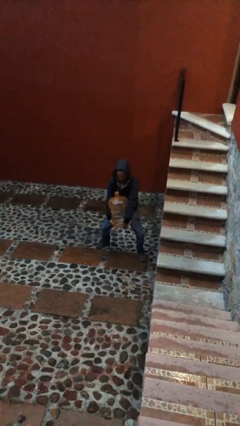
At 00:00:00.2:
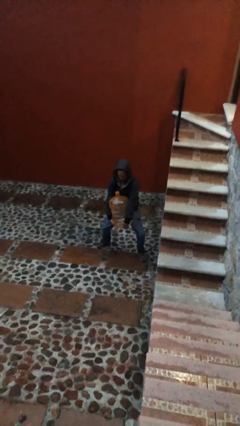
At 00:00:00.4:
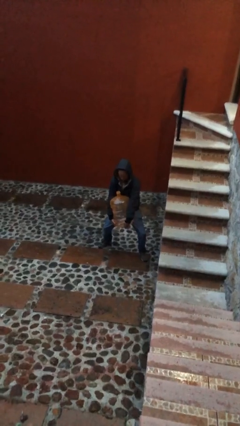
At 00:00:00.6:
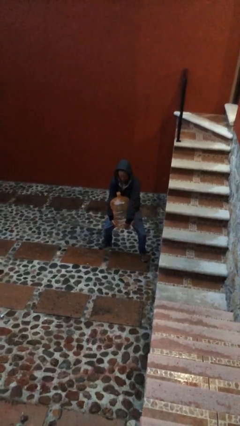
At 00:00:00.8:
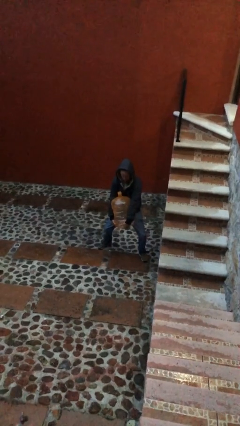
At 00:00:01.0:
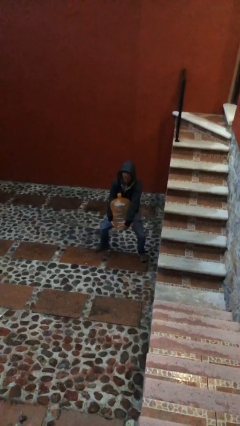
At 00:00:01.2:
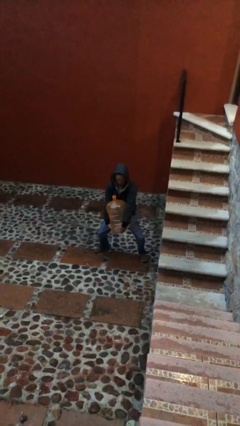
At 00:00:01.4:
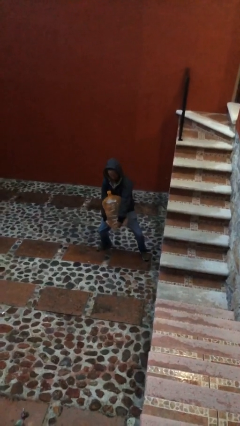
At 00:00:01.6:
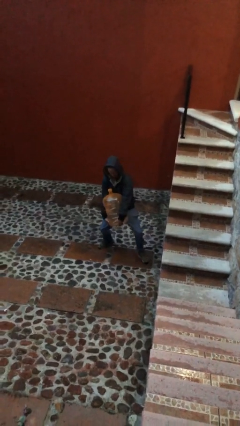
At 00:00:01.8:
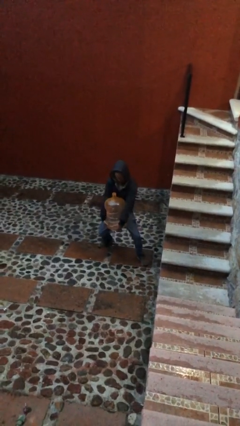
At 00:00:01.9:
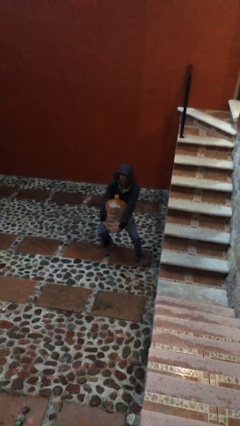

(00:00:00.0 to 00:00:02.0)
person carries heavy object

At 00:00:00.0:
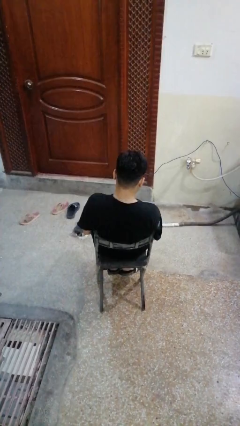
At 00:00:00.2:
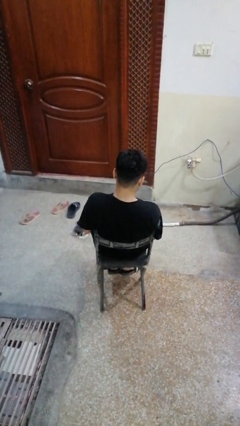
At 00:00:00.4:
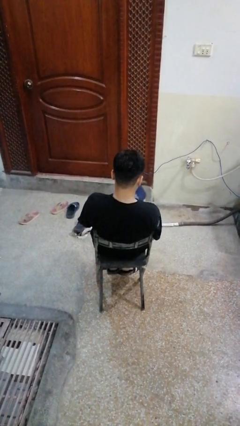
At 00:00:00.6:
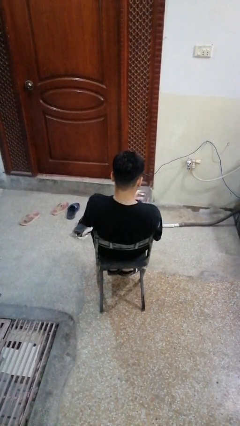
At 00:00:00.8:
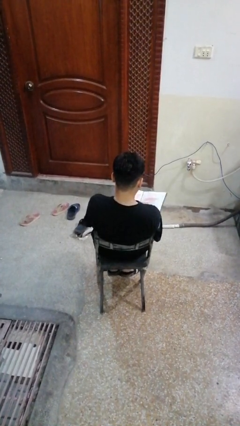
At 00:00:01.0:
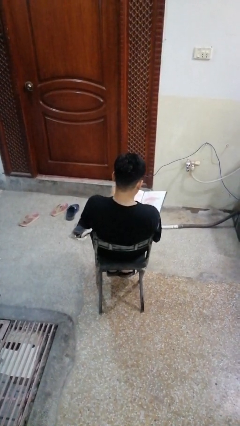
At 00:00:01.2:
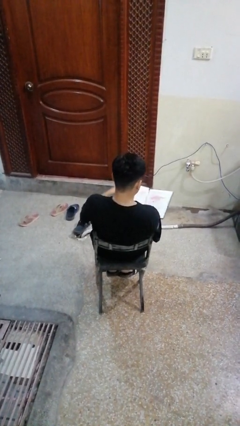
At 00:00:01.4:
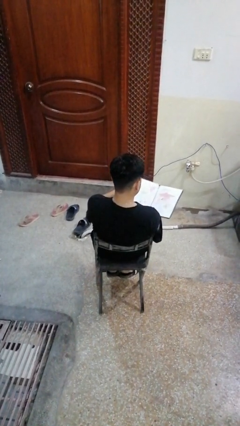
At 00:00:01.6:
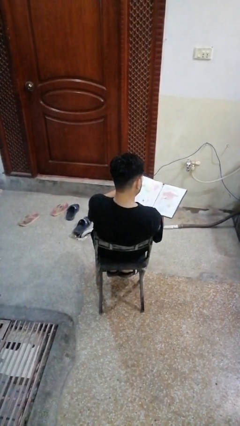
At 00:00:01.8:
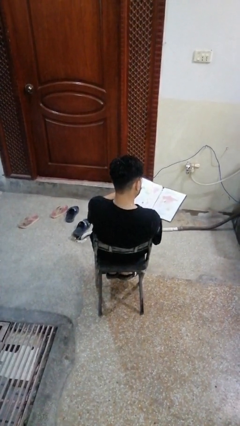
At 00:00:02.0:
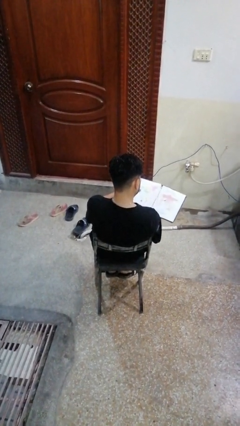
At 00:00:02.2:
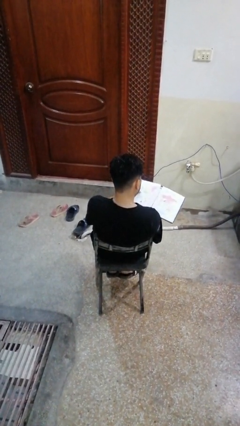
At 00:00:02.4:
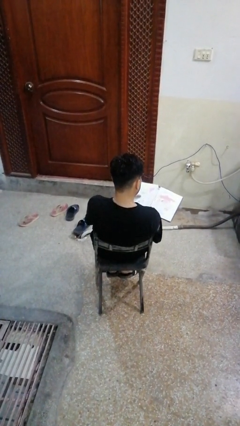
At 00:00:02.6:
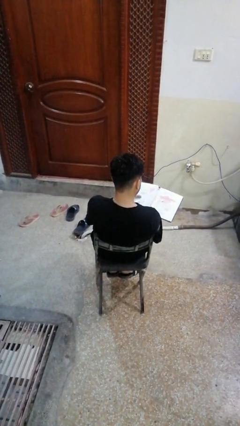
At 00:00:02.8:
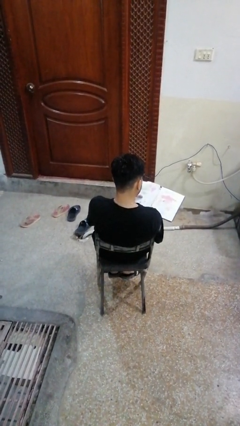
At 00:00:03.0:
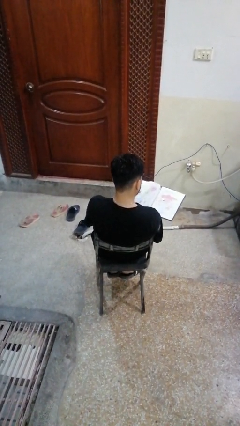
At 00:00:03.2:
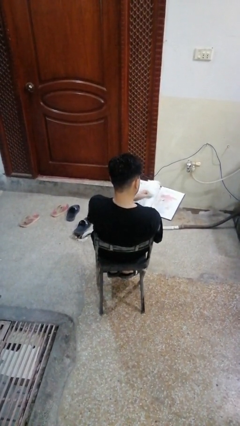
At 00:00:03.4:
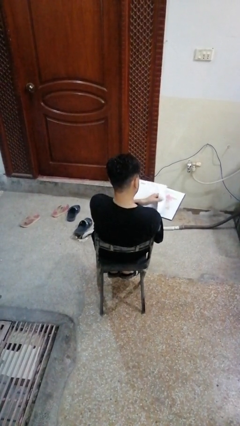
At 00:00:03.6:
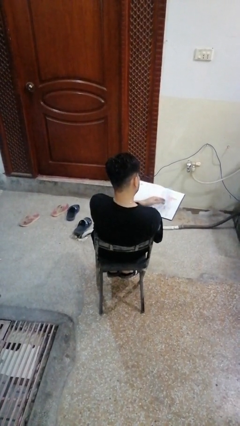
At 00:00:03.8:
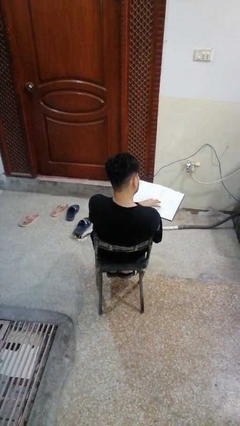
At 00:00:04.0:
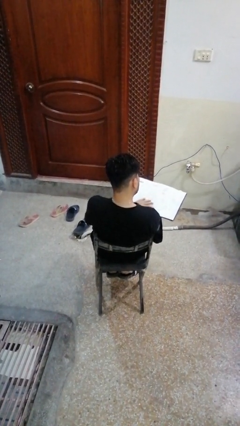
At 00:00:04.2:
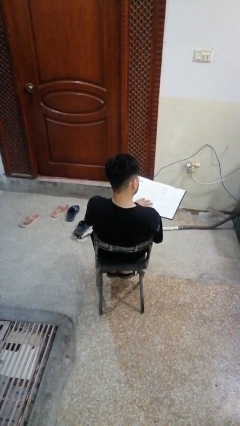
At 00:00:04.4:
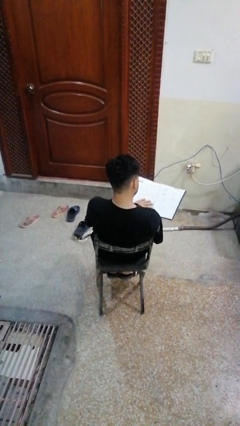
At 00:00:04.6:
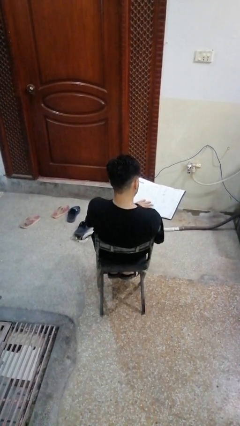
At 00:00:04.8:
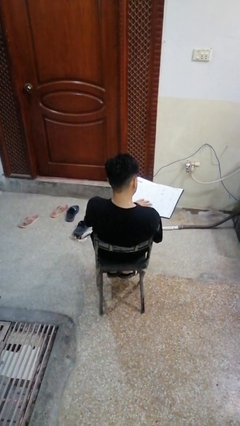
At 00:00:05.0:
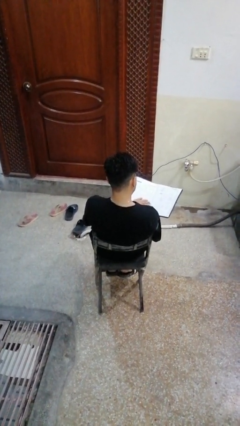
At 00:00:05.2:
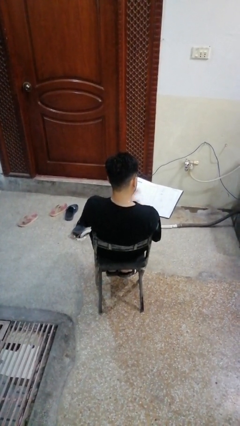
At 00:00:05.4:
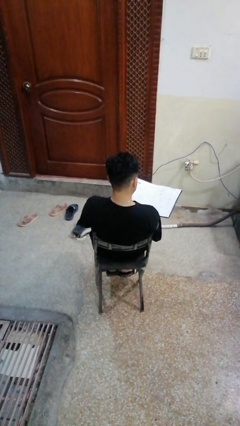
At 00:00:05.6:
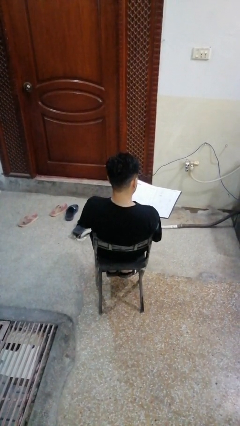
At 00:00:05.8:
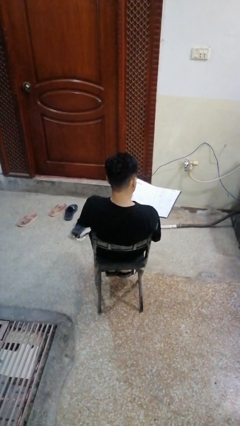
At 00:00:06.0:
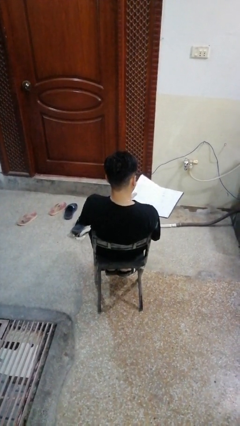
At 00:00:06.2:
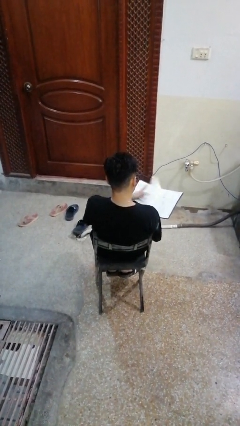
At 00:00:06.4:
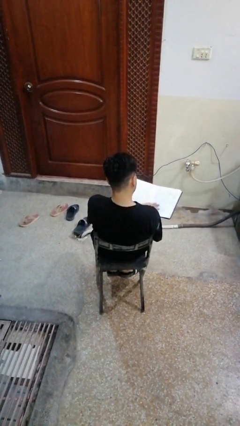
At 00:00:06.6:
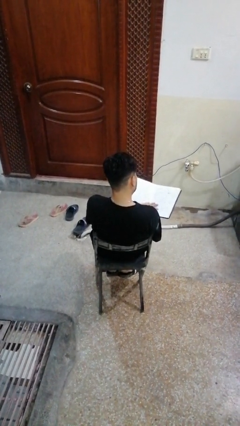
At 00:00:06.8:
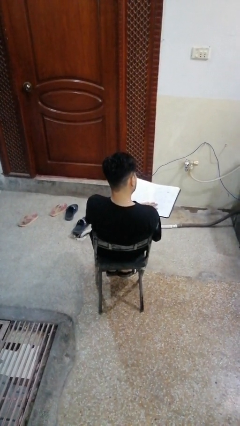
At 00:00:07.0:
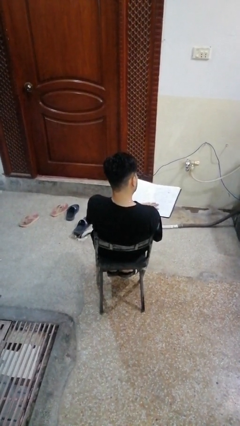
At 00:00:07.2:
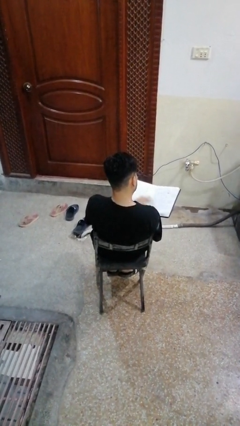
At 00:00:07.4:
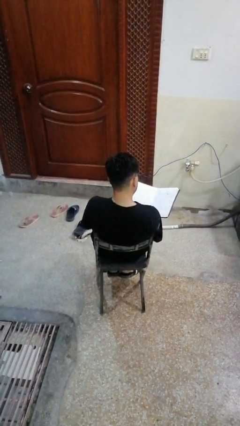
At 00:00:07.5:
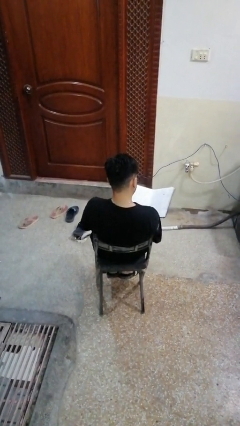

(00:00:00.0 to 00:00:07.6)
person reads book

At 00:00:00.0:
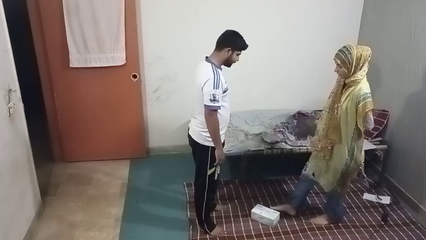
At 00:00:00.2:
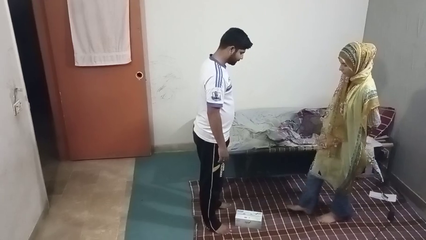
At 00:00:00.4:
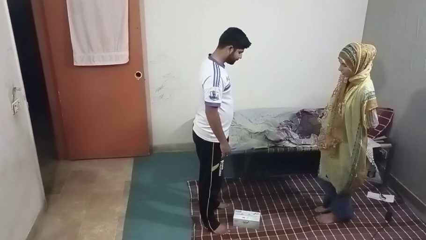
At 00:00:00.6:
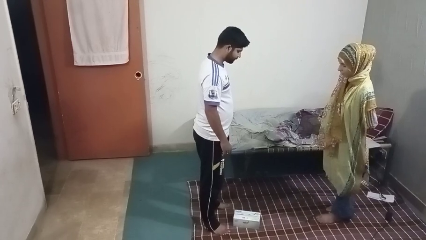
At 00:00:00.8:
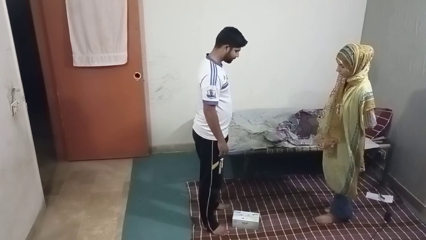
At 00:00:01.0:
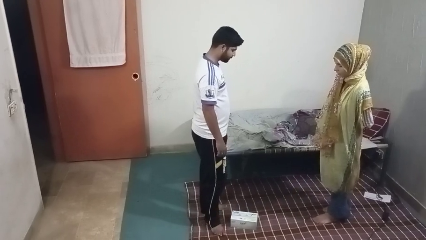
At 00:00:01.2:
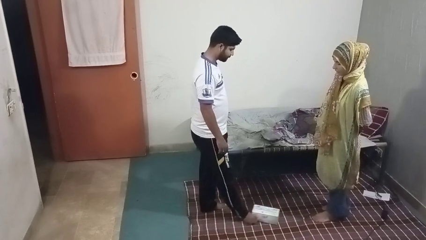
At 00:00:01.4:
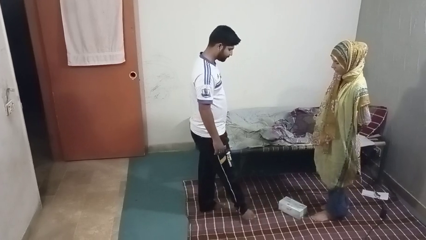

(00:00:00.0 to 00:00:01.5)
person kicks object to person

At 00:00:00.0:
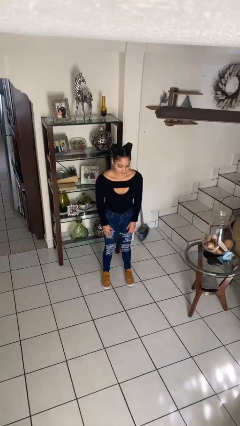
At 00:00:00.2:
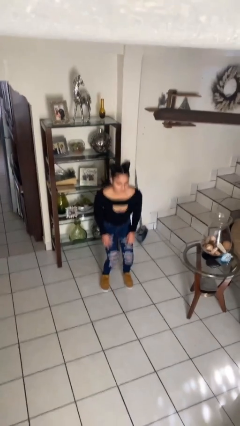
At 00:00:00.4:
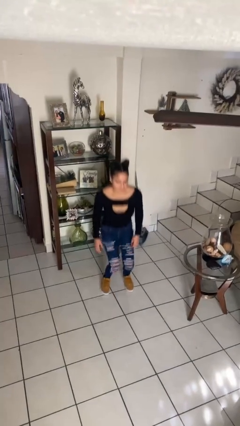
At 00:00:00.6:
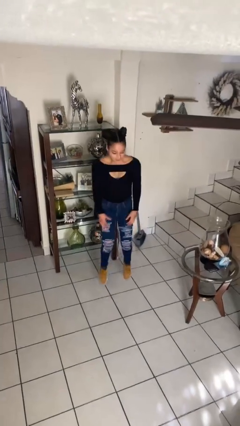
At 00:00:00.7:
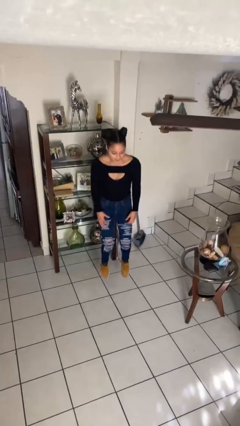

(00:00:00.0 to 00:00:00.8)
person jumps

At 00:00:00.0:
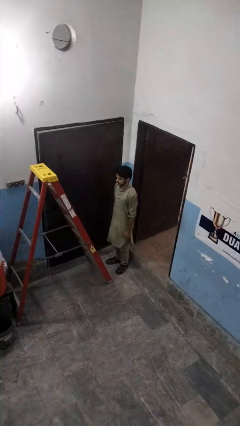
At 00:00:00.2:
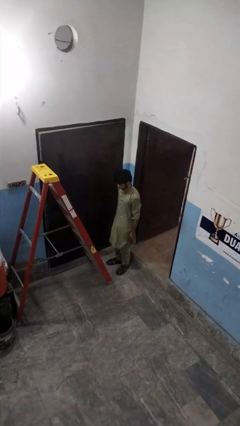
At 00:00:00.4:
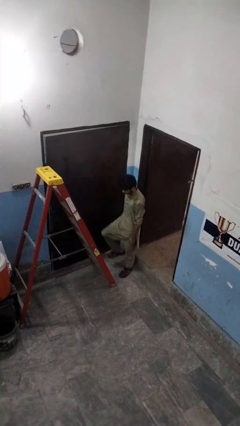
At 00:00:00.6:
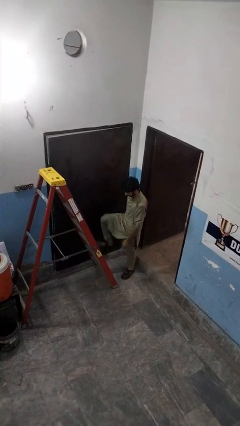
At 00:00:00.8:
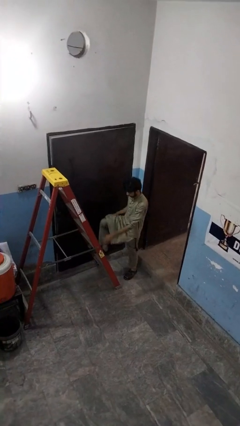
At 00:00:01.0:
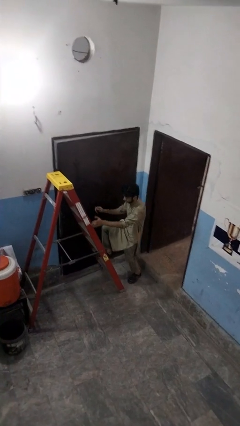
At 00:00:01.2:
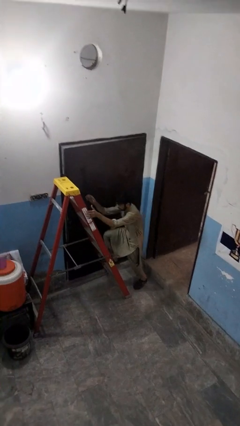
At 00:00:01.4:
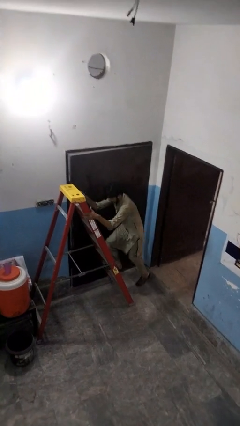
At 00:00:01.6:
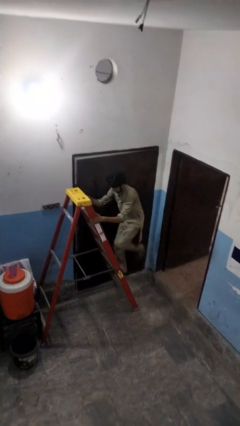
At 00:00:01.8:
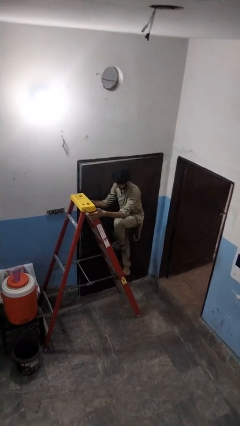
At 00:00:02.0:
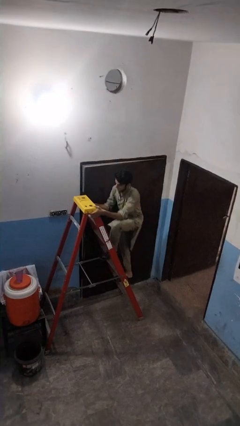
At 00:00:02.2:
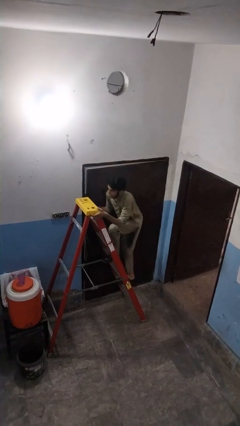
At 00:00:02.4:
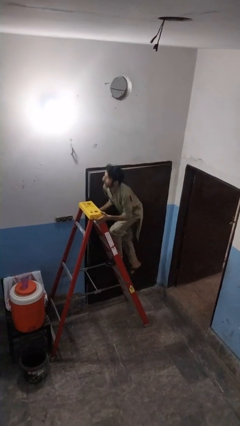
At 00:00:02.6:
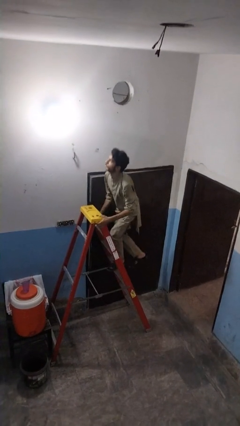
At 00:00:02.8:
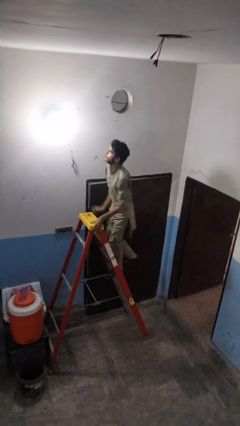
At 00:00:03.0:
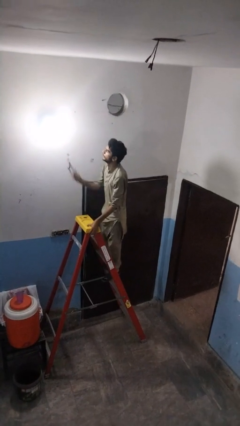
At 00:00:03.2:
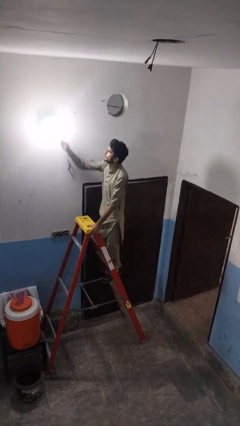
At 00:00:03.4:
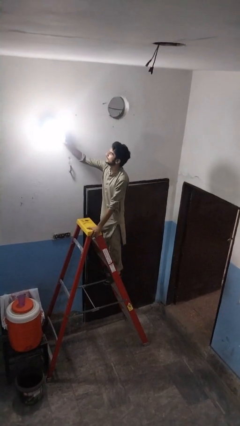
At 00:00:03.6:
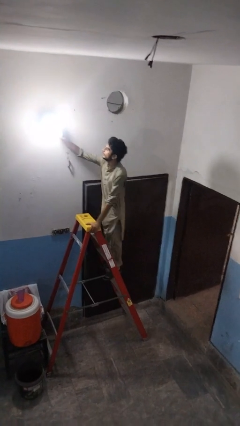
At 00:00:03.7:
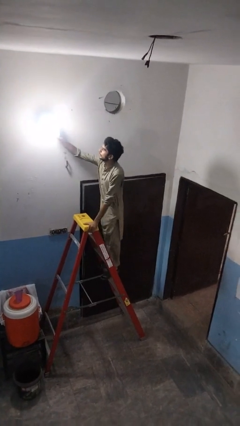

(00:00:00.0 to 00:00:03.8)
person climbs up ladder

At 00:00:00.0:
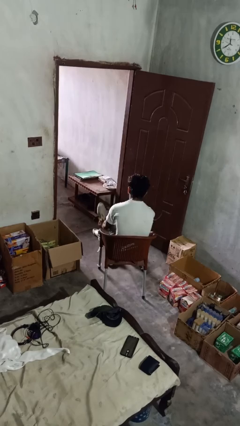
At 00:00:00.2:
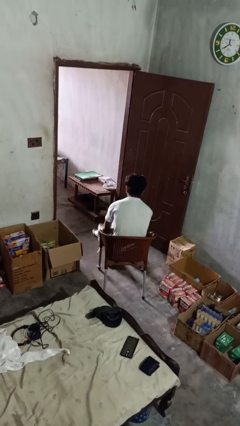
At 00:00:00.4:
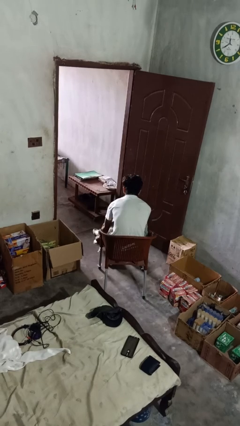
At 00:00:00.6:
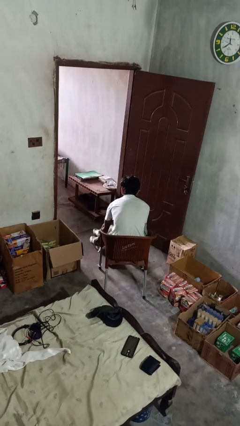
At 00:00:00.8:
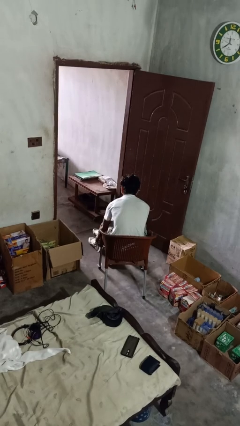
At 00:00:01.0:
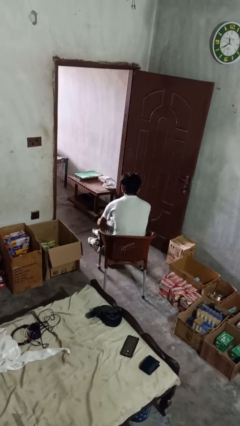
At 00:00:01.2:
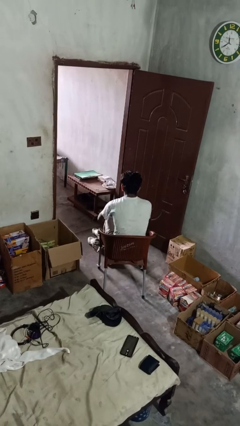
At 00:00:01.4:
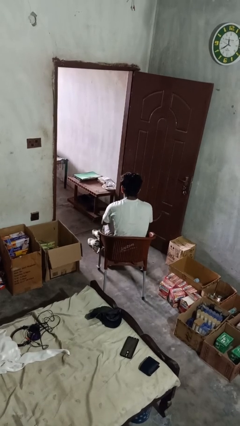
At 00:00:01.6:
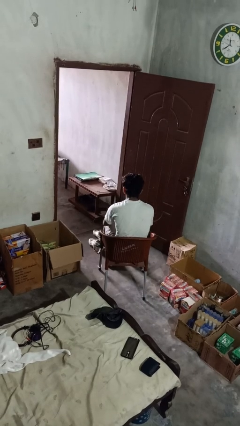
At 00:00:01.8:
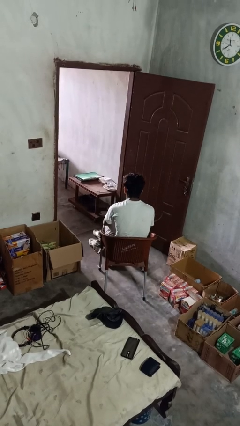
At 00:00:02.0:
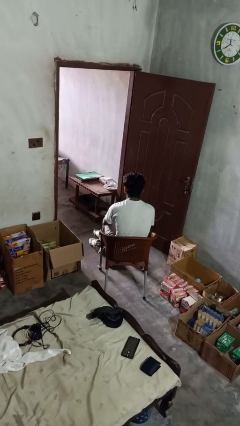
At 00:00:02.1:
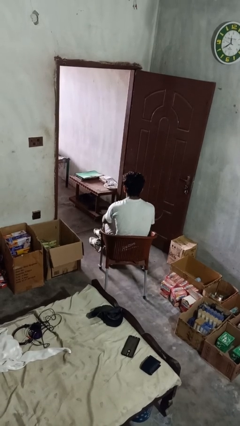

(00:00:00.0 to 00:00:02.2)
person takes off shoes
